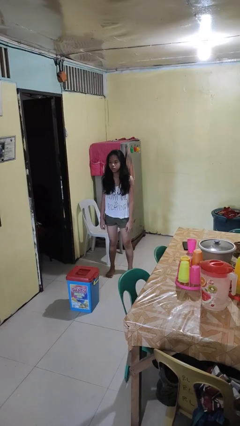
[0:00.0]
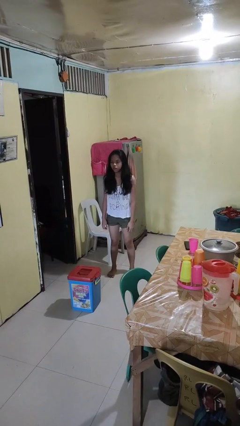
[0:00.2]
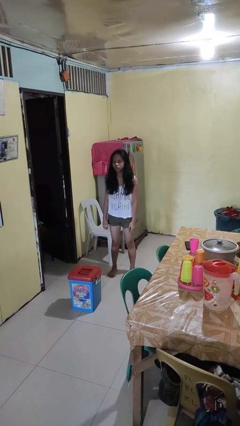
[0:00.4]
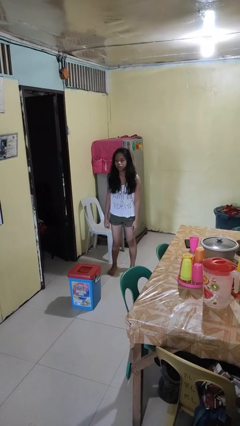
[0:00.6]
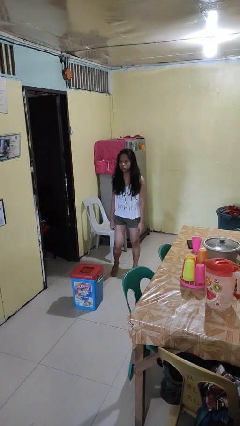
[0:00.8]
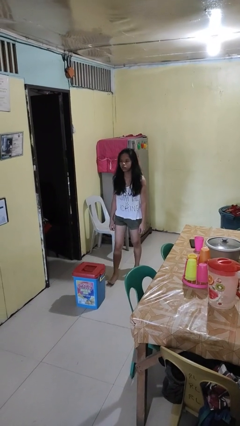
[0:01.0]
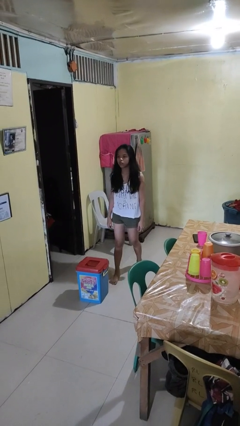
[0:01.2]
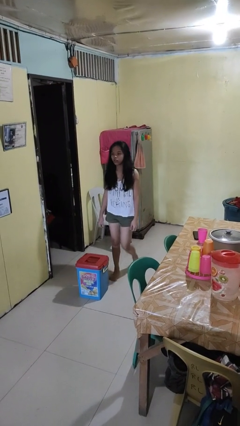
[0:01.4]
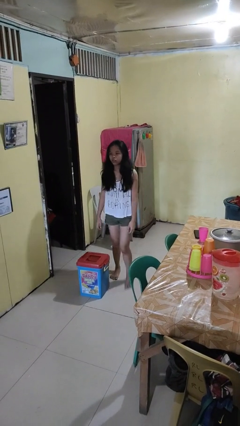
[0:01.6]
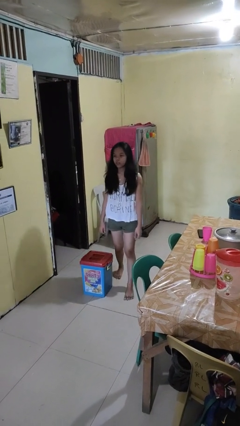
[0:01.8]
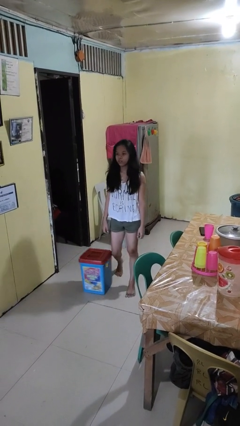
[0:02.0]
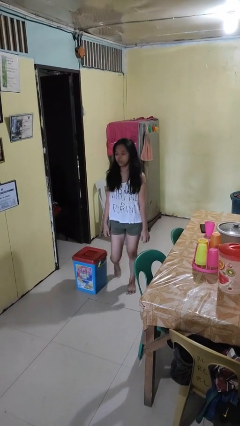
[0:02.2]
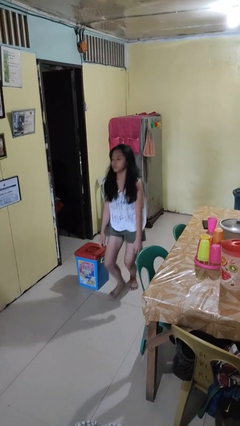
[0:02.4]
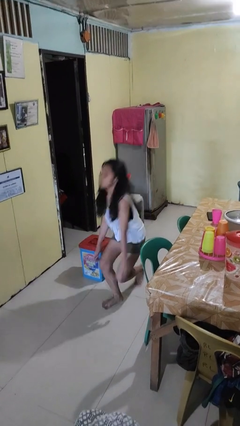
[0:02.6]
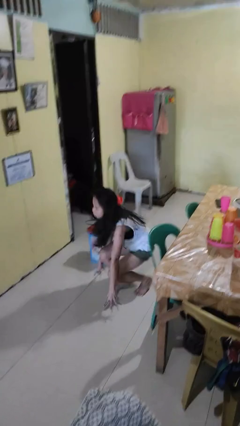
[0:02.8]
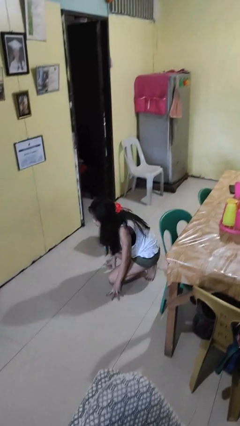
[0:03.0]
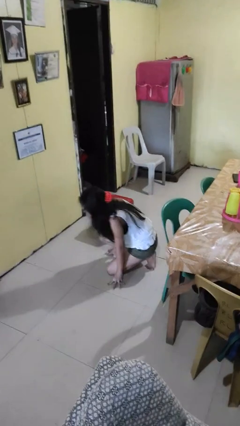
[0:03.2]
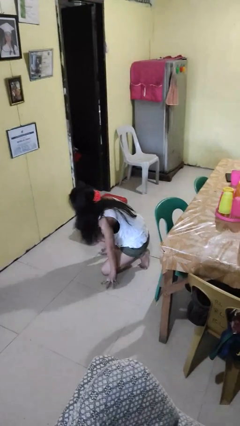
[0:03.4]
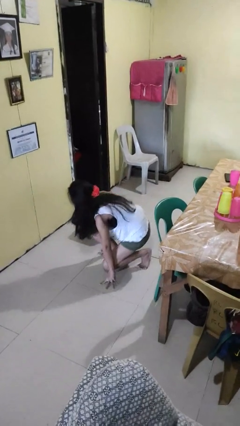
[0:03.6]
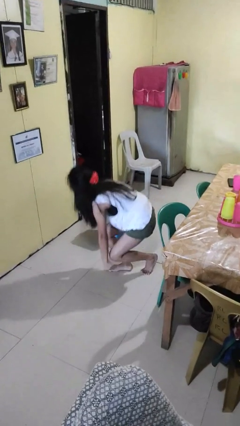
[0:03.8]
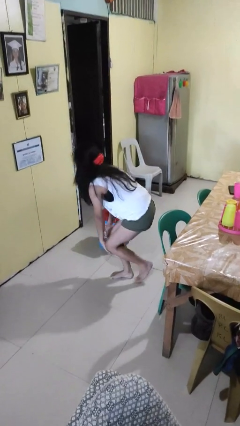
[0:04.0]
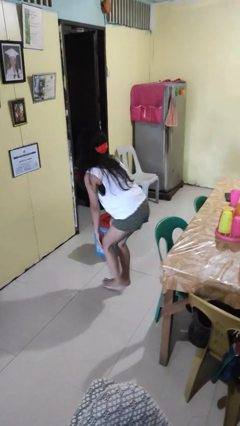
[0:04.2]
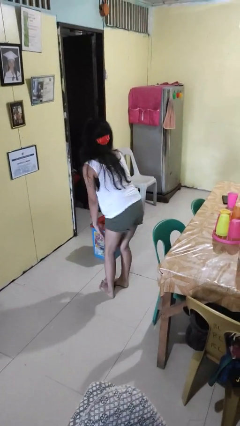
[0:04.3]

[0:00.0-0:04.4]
person trips on object on floor

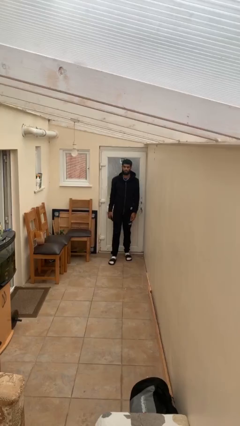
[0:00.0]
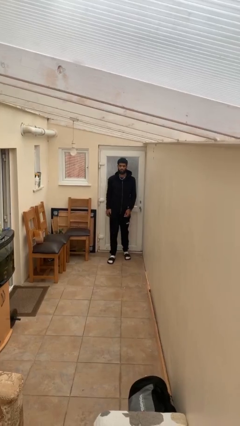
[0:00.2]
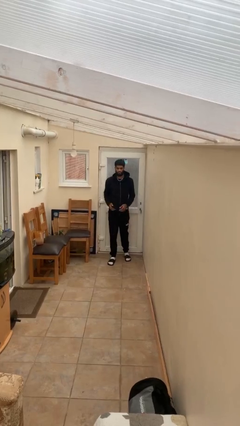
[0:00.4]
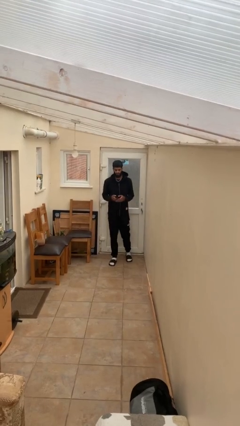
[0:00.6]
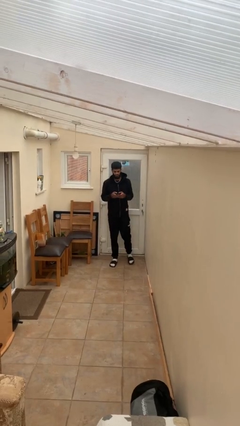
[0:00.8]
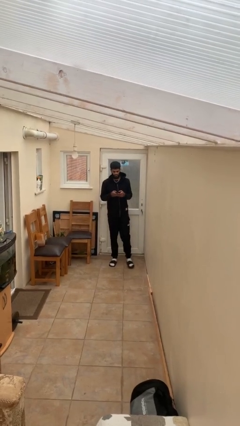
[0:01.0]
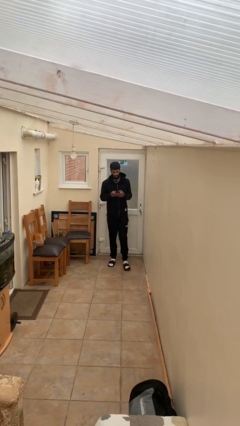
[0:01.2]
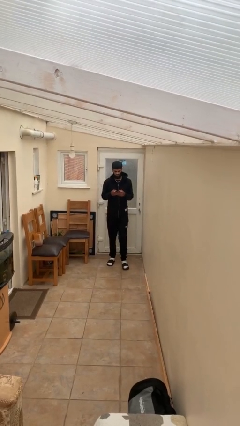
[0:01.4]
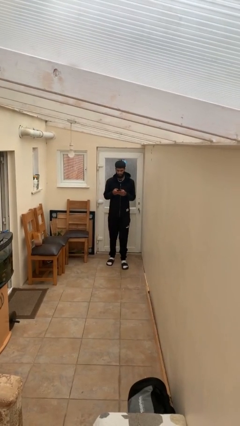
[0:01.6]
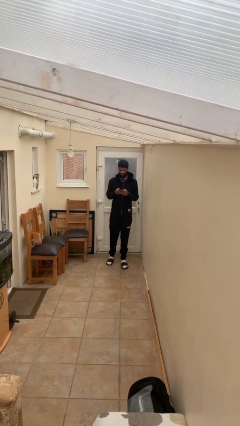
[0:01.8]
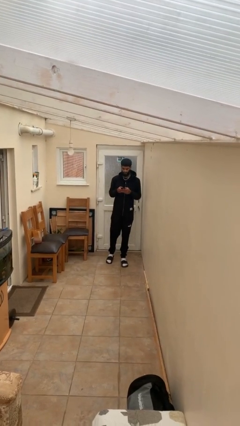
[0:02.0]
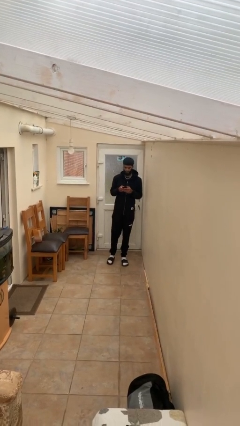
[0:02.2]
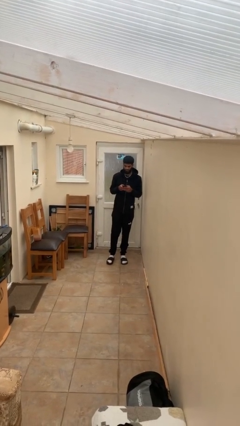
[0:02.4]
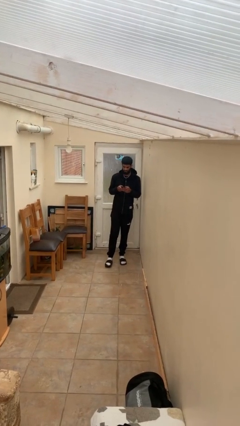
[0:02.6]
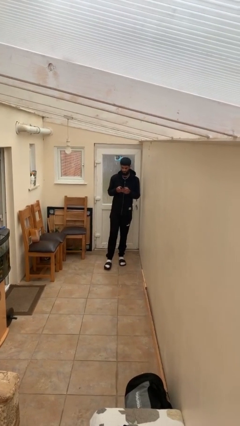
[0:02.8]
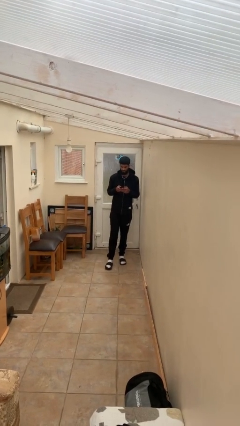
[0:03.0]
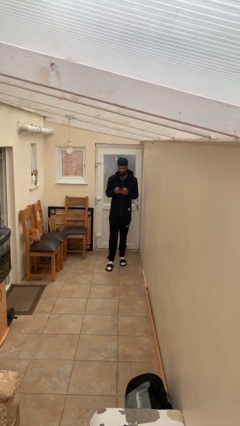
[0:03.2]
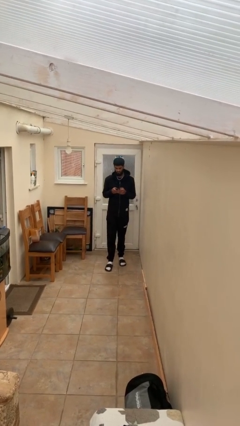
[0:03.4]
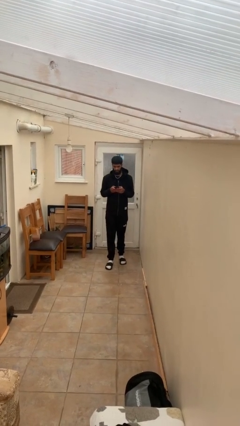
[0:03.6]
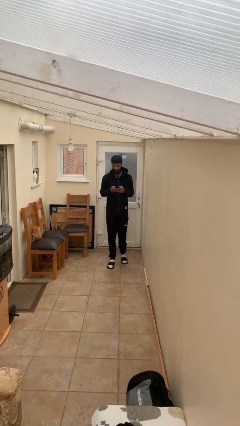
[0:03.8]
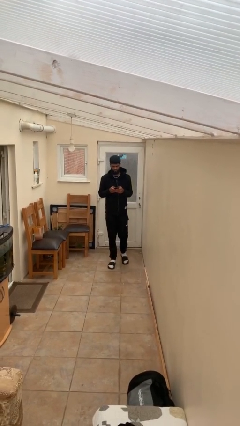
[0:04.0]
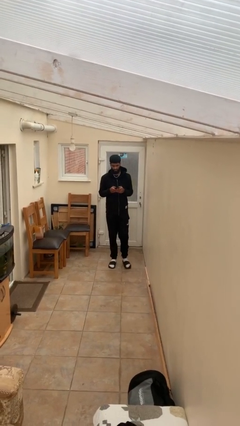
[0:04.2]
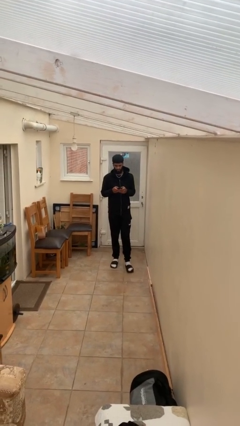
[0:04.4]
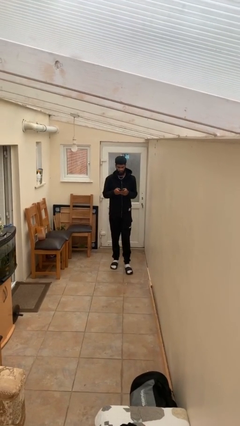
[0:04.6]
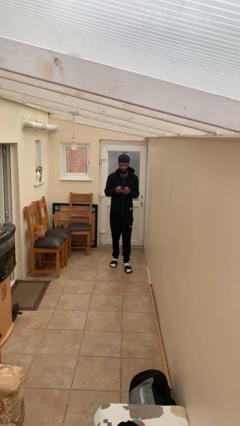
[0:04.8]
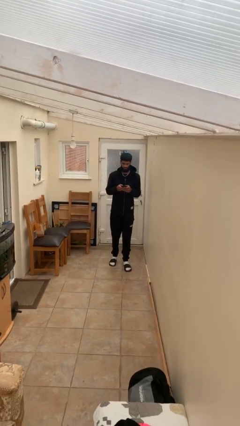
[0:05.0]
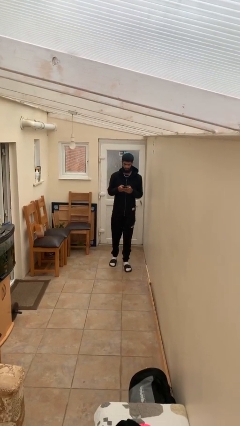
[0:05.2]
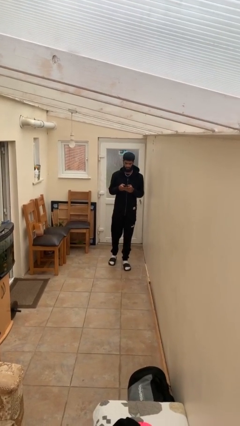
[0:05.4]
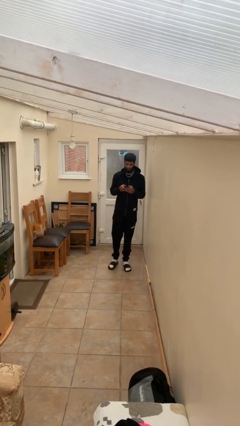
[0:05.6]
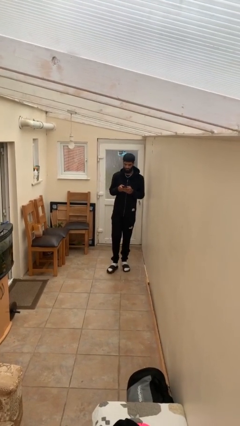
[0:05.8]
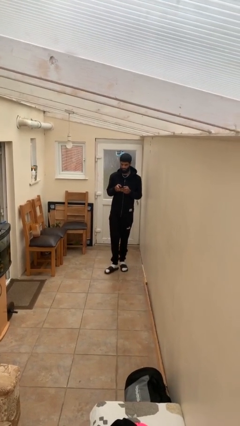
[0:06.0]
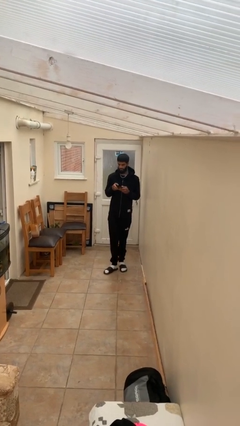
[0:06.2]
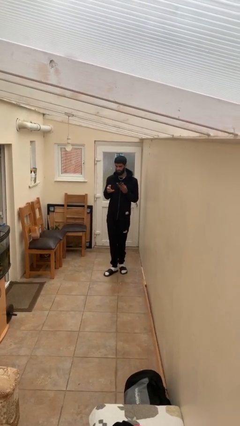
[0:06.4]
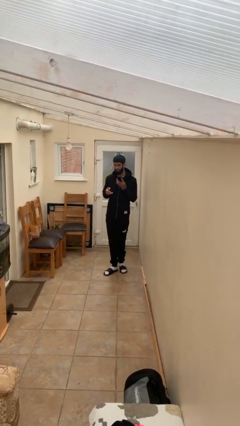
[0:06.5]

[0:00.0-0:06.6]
person texts on phone

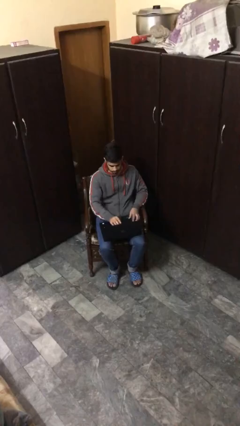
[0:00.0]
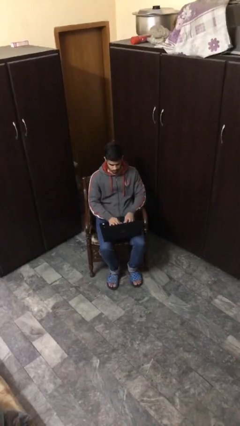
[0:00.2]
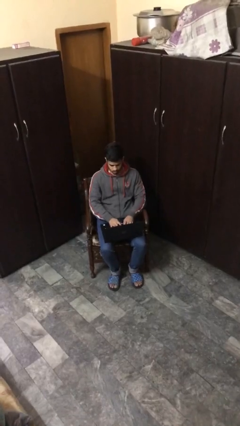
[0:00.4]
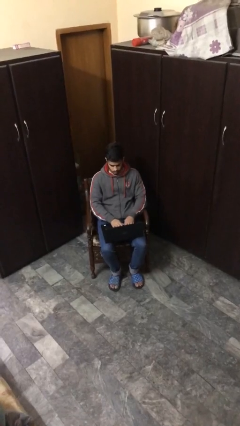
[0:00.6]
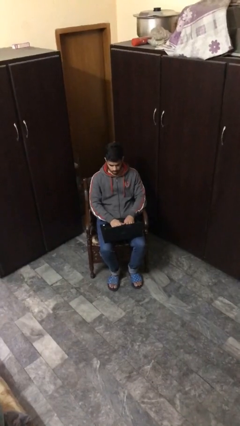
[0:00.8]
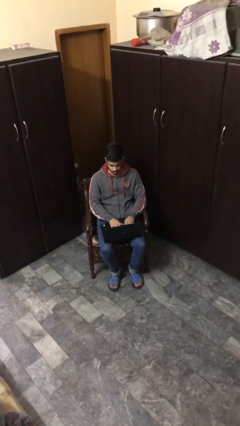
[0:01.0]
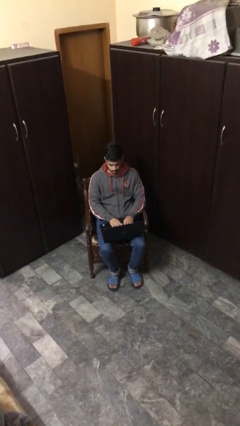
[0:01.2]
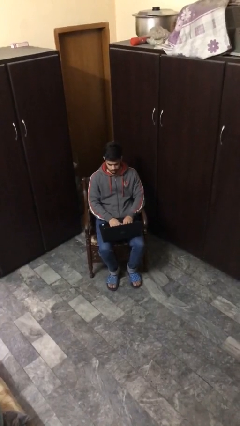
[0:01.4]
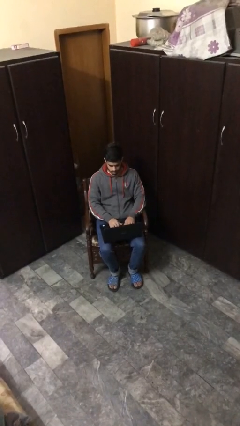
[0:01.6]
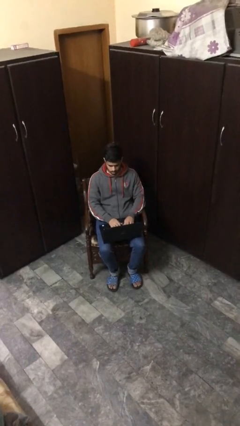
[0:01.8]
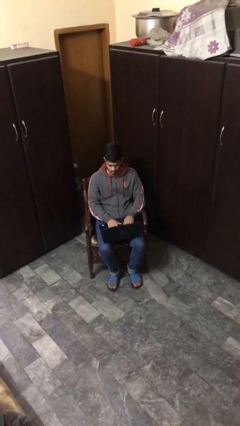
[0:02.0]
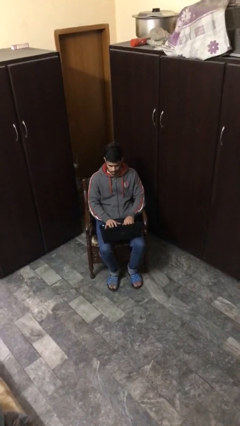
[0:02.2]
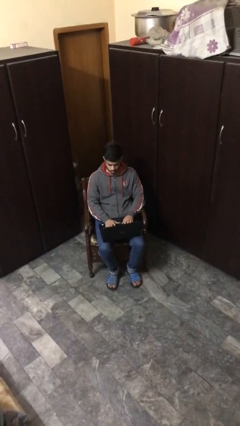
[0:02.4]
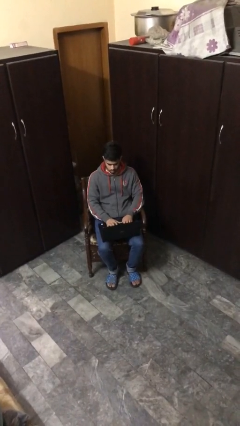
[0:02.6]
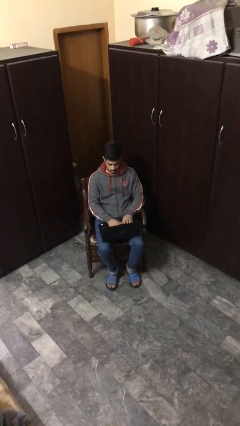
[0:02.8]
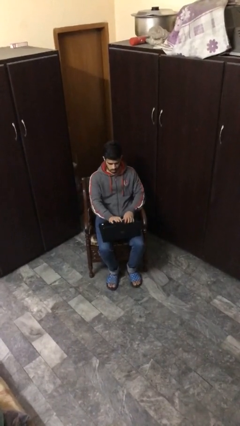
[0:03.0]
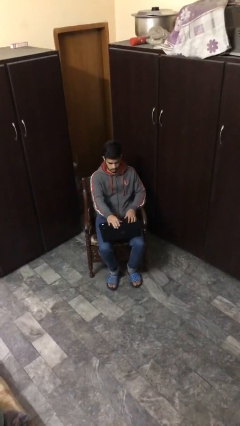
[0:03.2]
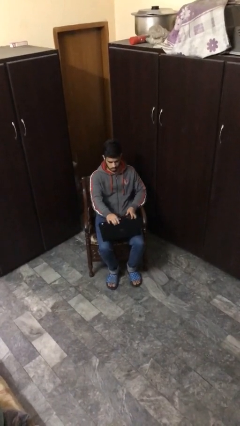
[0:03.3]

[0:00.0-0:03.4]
person interacts with laptop

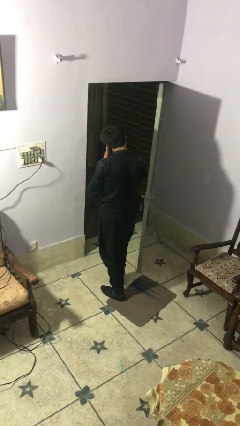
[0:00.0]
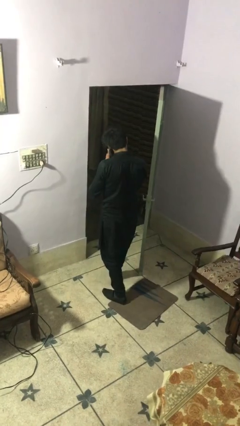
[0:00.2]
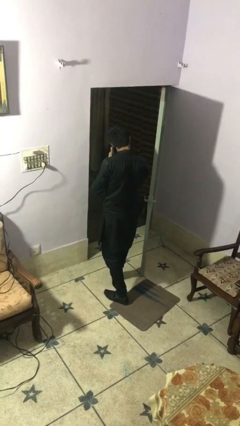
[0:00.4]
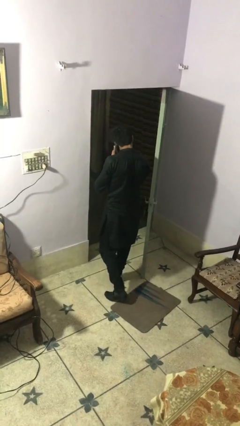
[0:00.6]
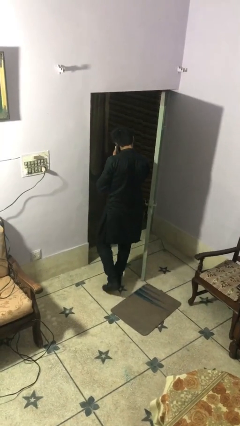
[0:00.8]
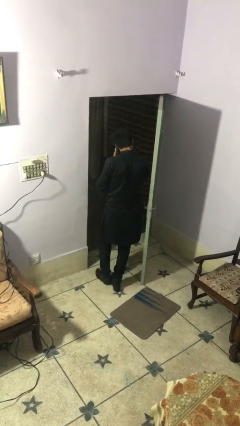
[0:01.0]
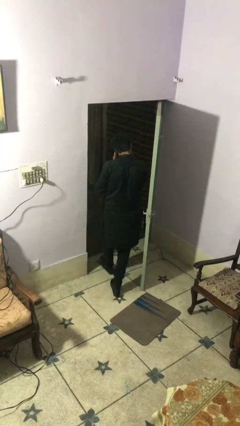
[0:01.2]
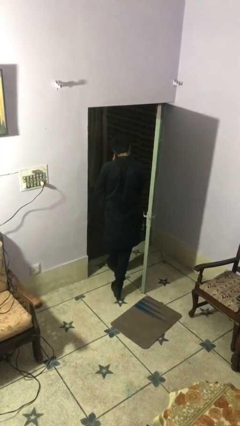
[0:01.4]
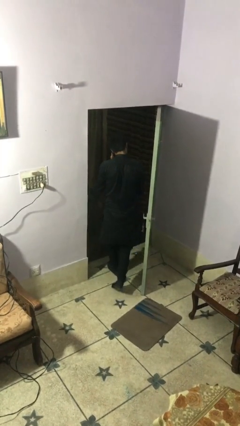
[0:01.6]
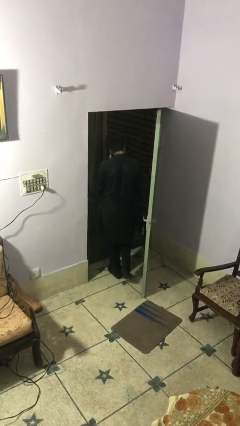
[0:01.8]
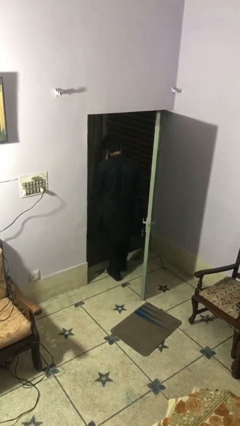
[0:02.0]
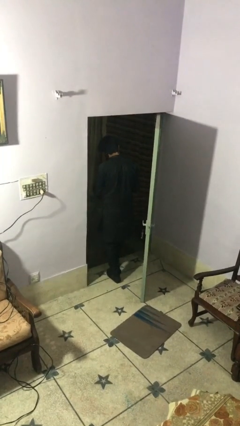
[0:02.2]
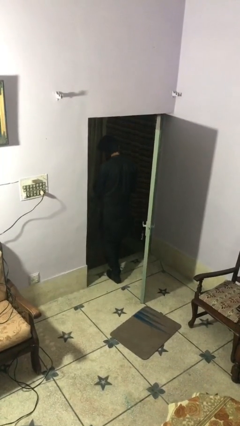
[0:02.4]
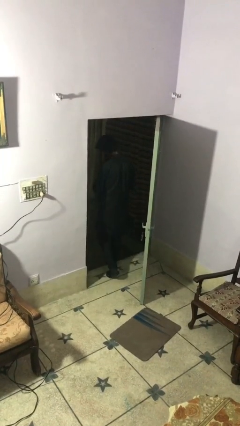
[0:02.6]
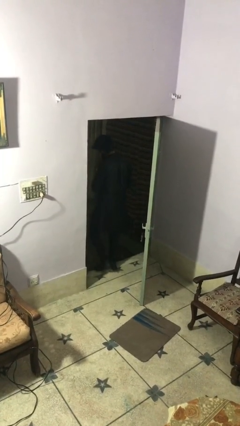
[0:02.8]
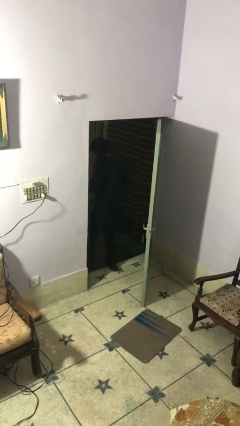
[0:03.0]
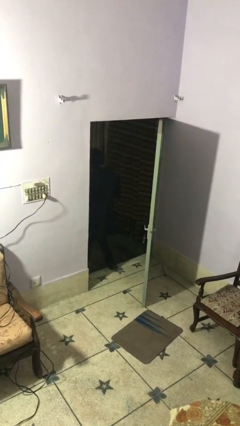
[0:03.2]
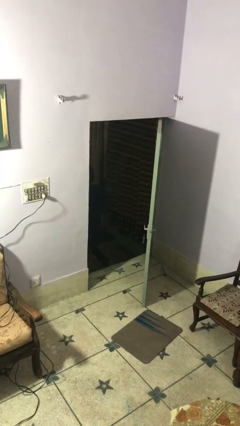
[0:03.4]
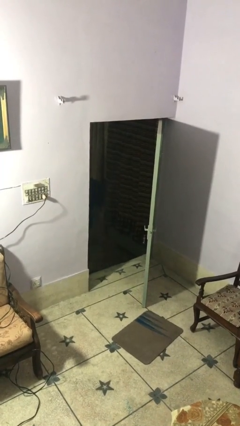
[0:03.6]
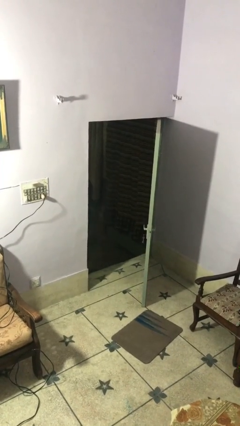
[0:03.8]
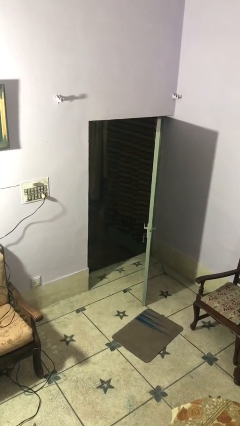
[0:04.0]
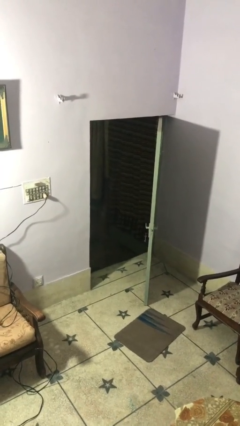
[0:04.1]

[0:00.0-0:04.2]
person exits scene through structure
